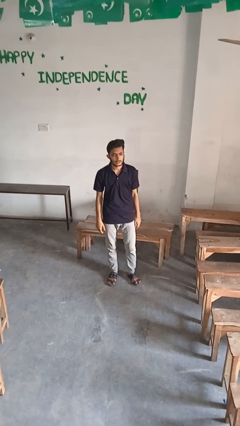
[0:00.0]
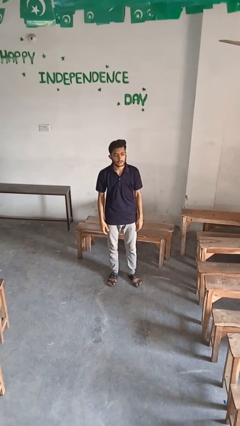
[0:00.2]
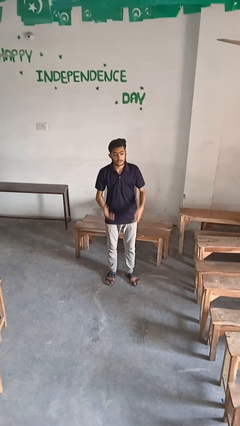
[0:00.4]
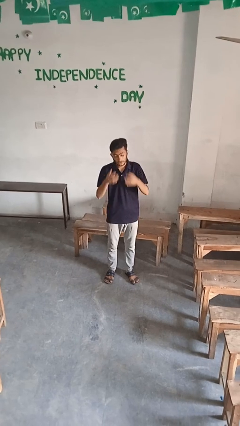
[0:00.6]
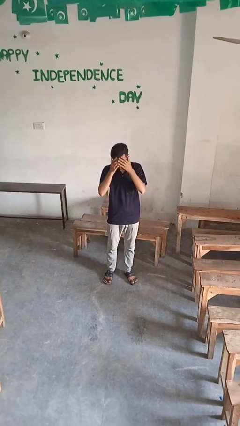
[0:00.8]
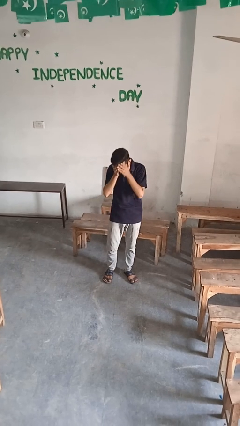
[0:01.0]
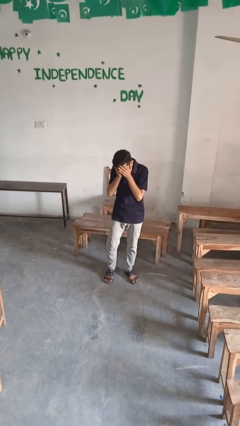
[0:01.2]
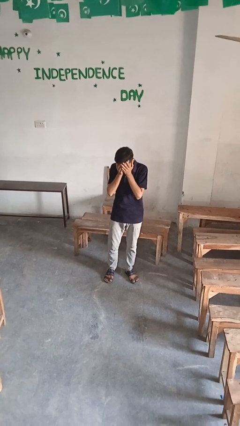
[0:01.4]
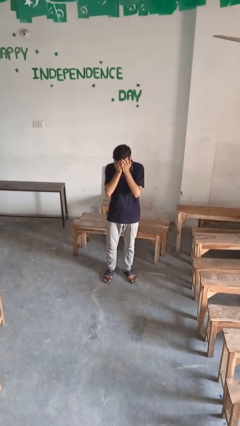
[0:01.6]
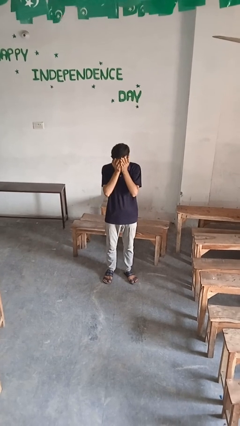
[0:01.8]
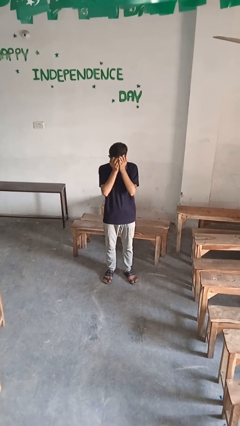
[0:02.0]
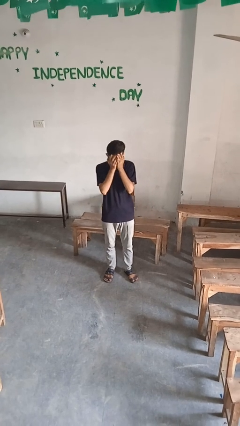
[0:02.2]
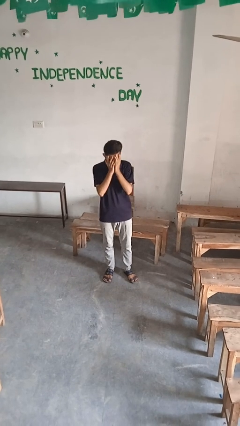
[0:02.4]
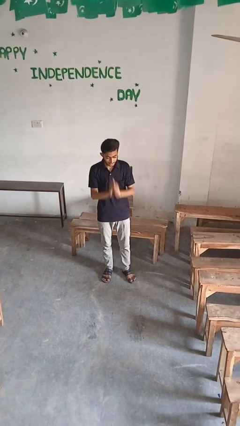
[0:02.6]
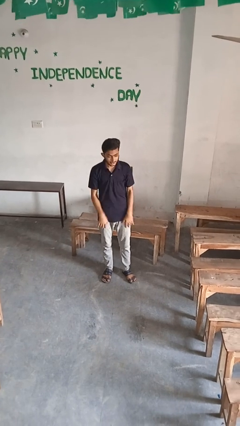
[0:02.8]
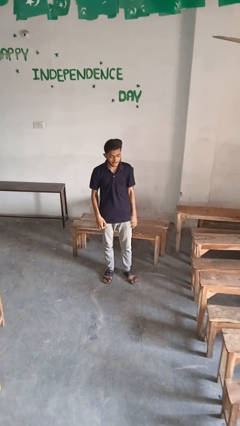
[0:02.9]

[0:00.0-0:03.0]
person covers face with hands

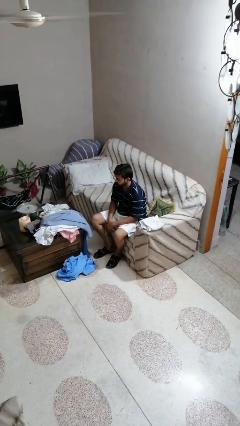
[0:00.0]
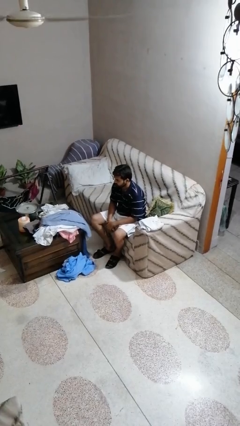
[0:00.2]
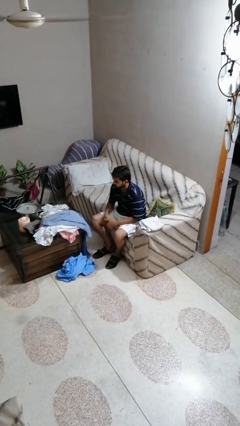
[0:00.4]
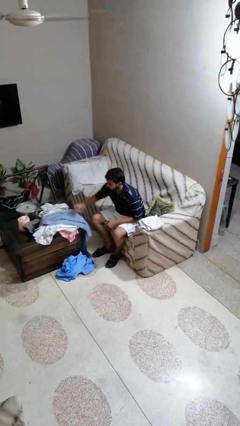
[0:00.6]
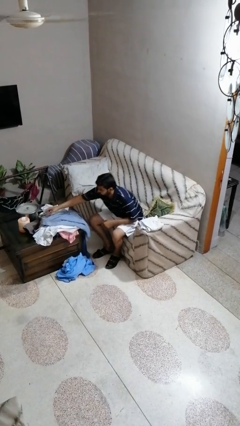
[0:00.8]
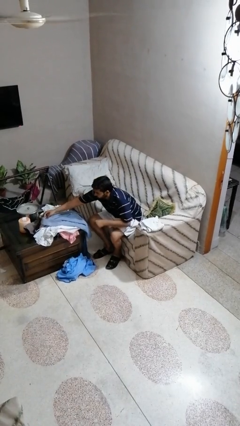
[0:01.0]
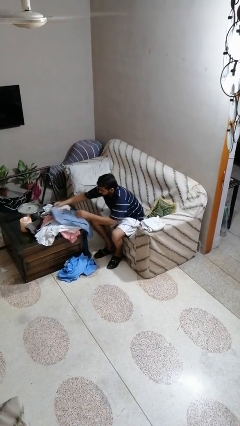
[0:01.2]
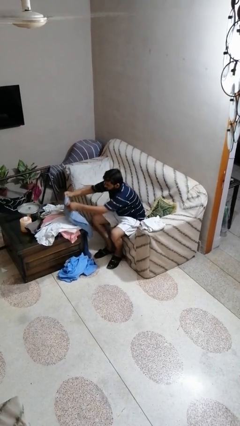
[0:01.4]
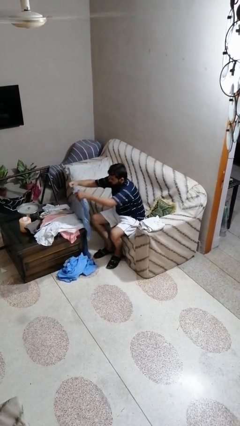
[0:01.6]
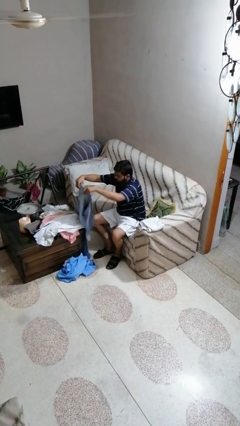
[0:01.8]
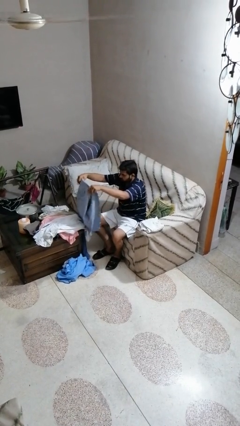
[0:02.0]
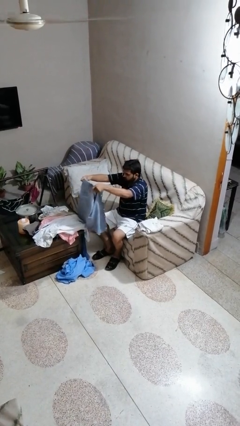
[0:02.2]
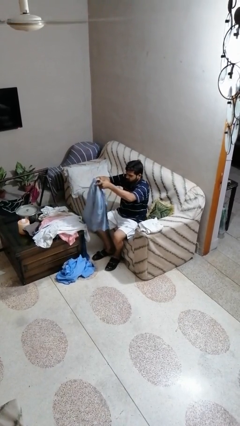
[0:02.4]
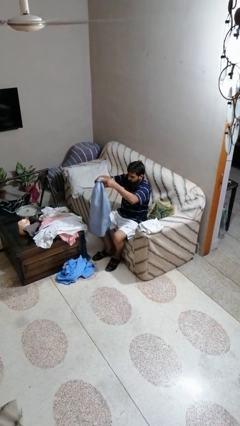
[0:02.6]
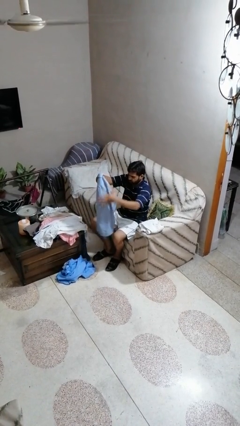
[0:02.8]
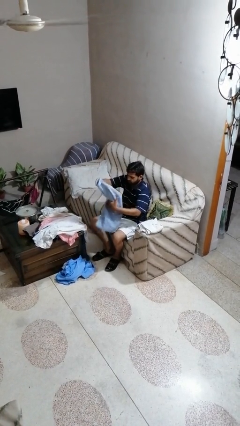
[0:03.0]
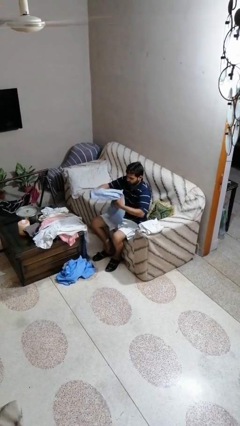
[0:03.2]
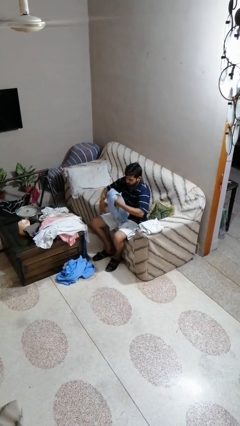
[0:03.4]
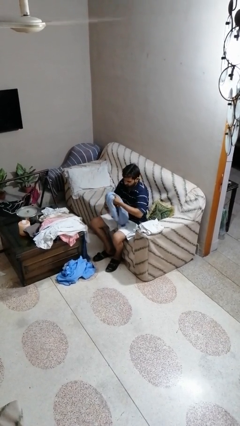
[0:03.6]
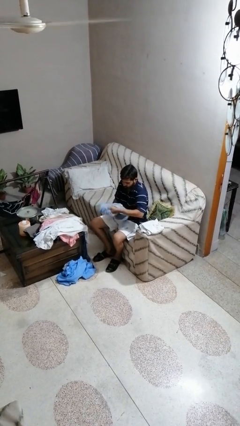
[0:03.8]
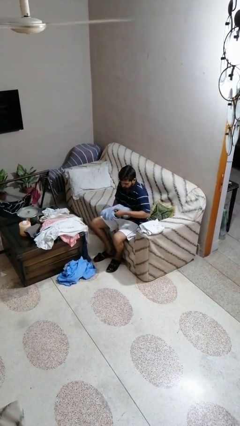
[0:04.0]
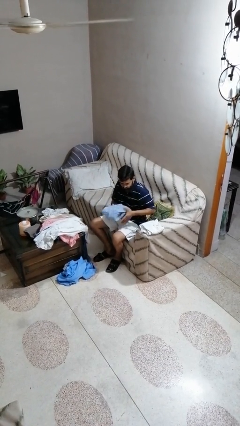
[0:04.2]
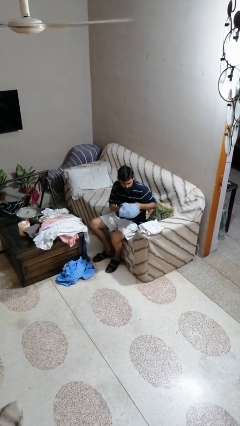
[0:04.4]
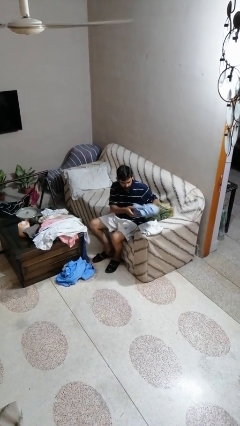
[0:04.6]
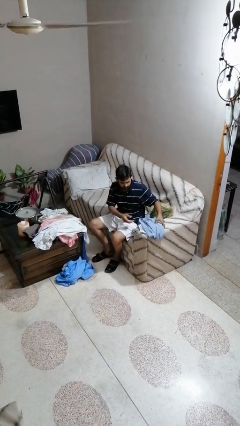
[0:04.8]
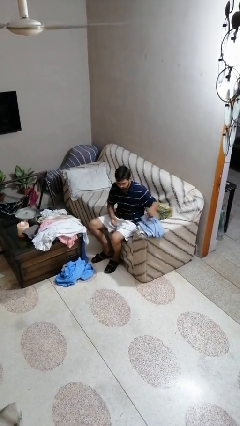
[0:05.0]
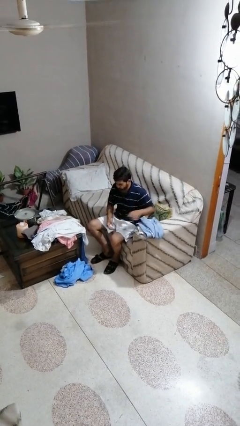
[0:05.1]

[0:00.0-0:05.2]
person folds shirt

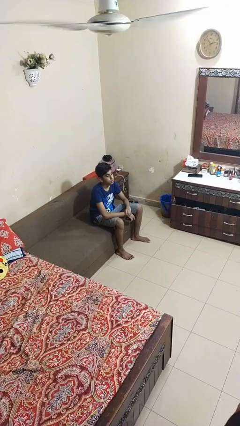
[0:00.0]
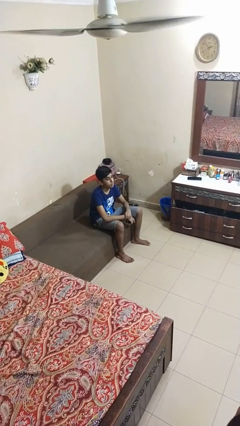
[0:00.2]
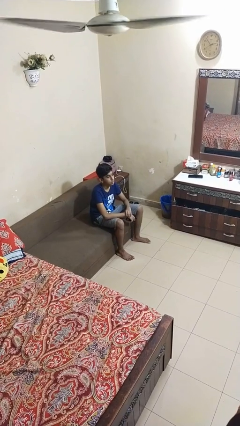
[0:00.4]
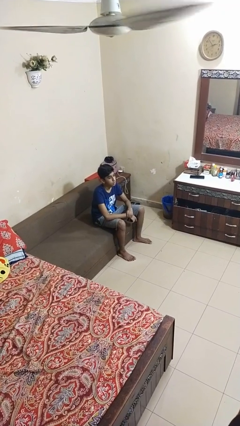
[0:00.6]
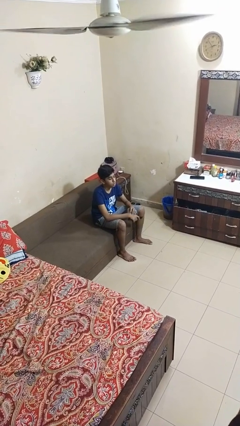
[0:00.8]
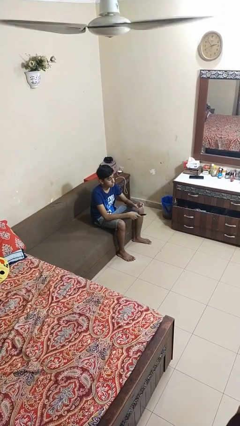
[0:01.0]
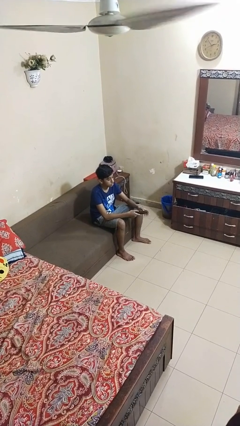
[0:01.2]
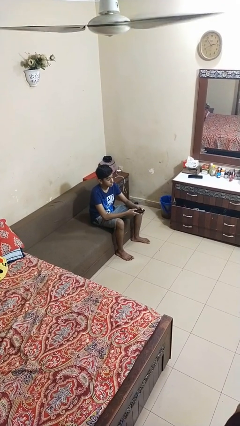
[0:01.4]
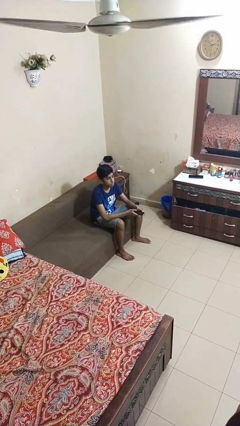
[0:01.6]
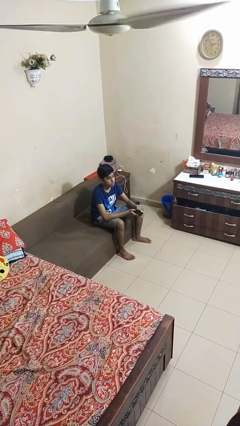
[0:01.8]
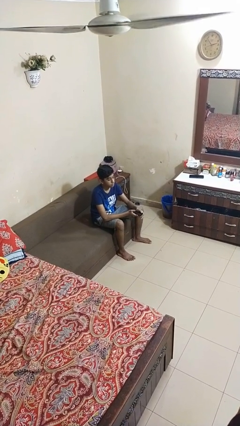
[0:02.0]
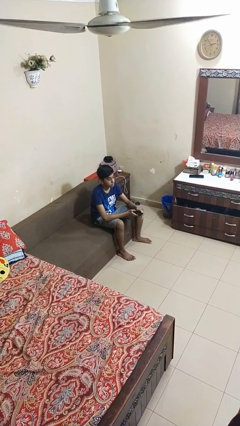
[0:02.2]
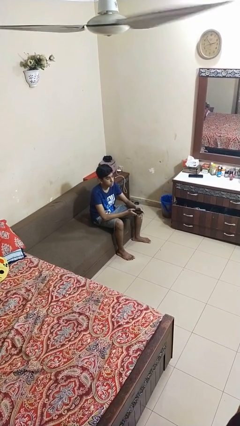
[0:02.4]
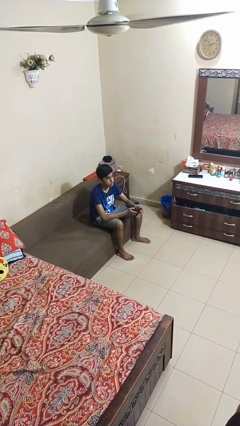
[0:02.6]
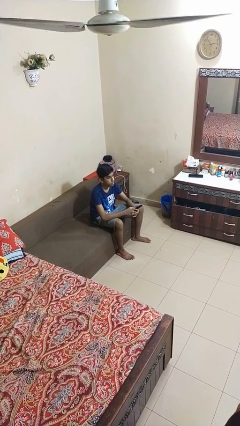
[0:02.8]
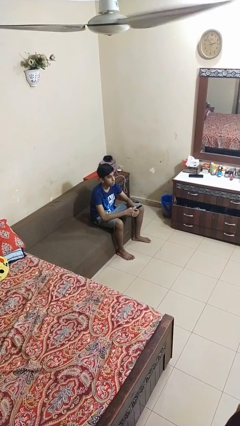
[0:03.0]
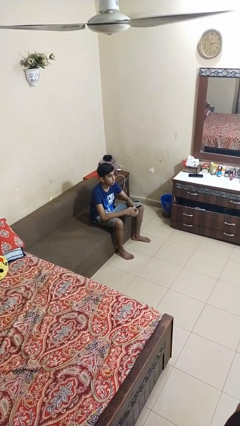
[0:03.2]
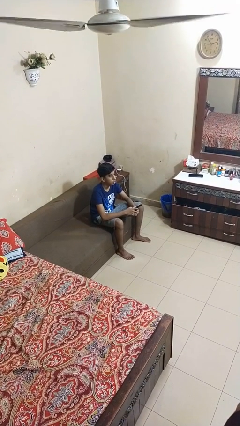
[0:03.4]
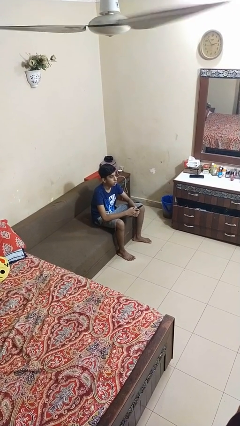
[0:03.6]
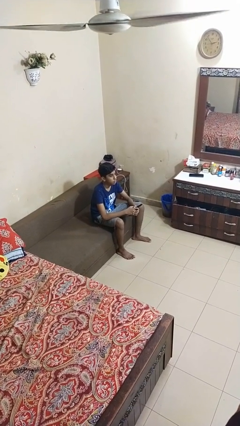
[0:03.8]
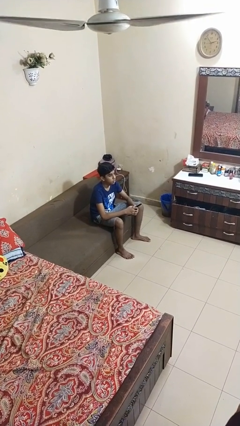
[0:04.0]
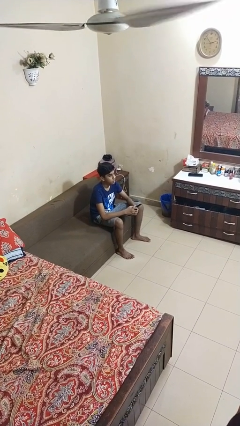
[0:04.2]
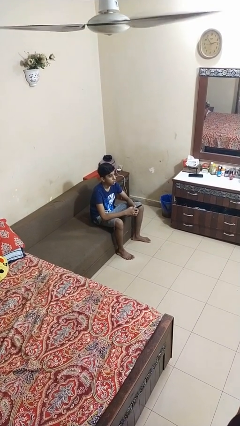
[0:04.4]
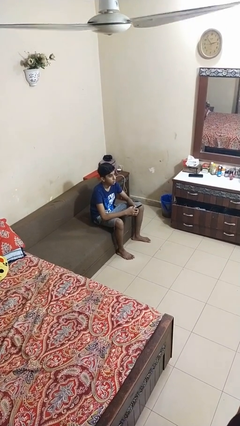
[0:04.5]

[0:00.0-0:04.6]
person uses television remote

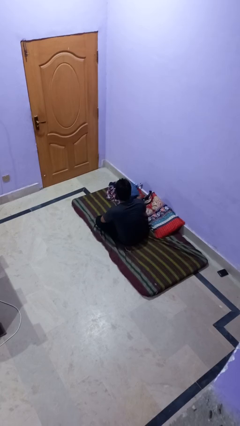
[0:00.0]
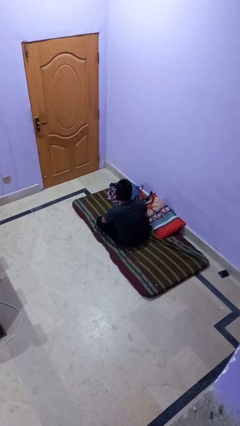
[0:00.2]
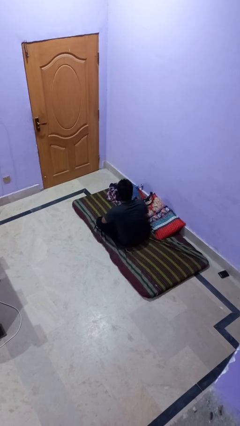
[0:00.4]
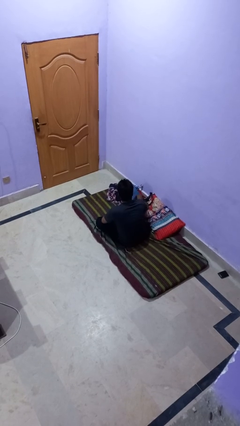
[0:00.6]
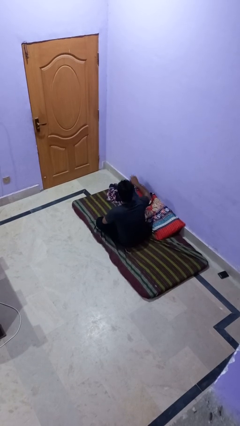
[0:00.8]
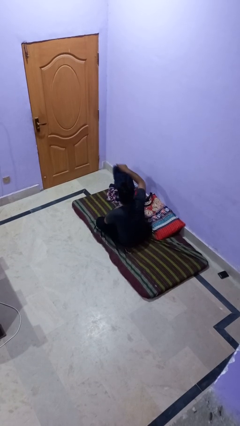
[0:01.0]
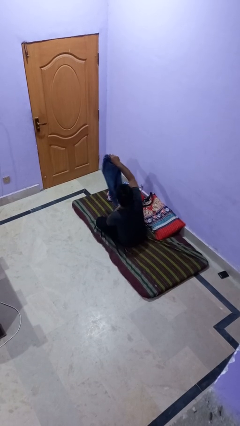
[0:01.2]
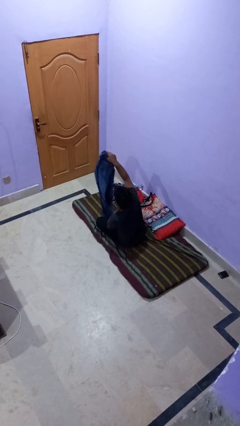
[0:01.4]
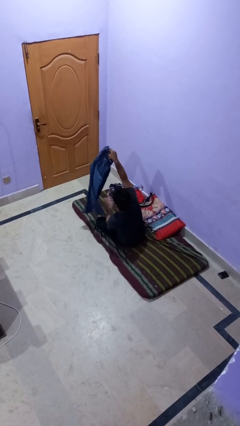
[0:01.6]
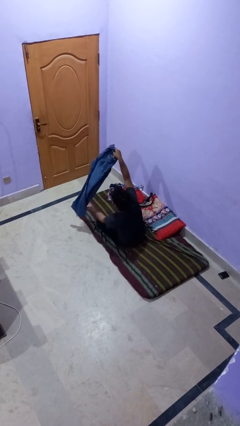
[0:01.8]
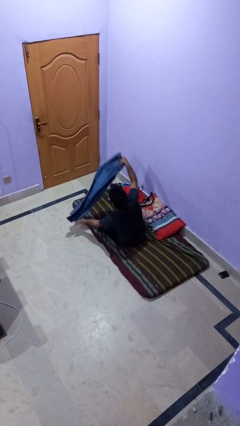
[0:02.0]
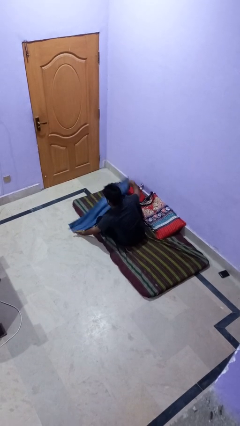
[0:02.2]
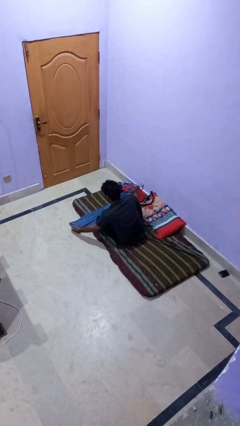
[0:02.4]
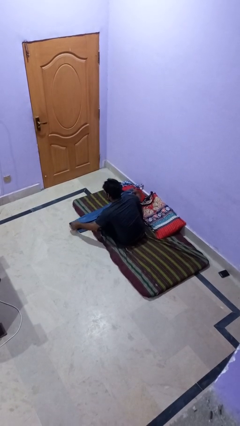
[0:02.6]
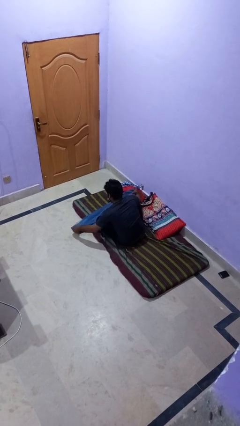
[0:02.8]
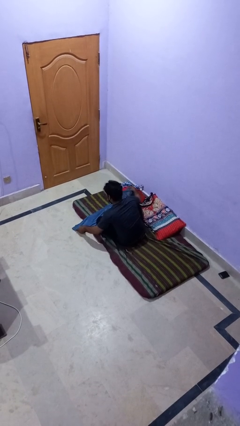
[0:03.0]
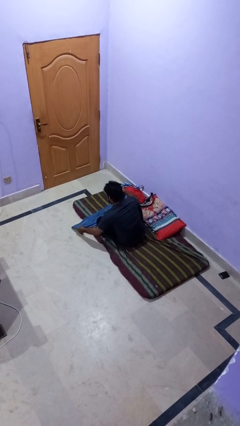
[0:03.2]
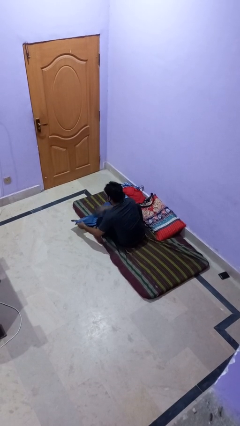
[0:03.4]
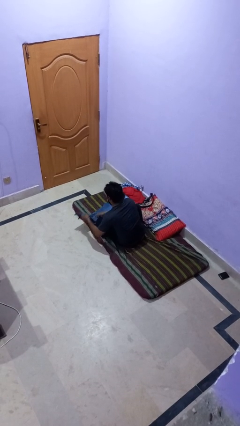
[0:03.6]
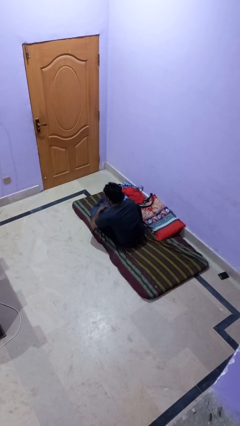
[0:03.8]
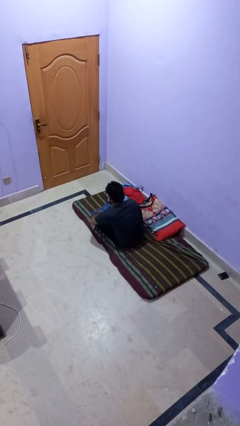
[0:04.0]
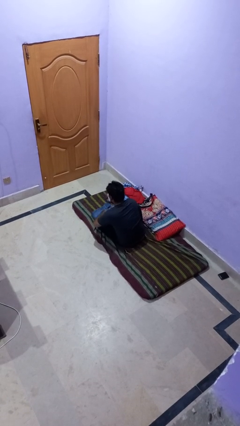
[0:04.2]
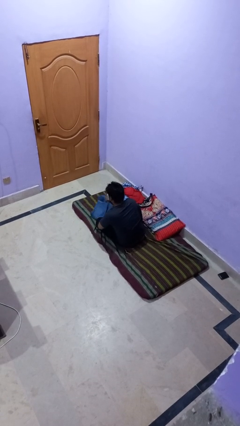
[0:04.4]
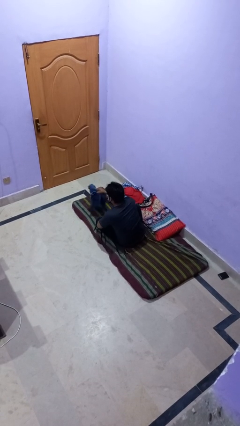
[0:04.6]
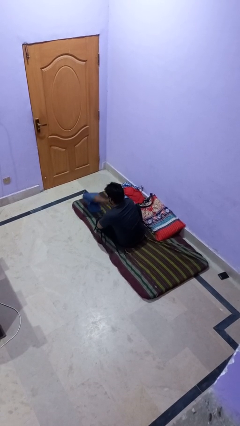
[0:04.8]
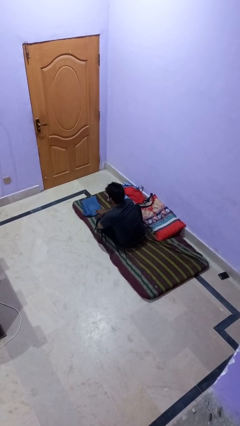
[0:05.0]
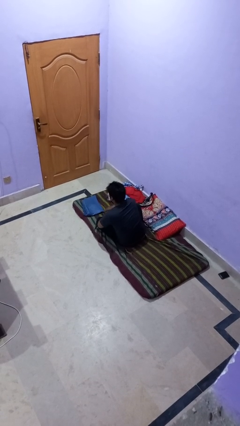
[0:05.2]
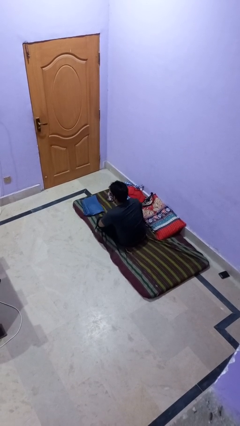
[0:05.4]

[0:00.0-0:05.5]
person folds pants
